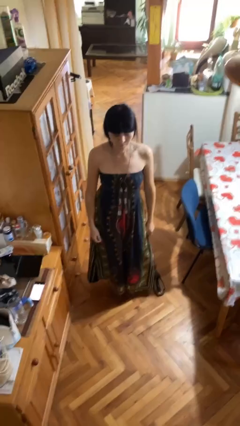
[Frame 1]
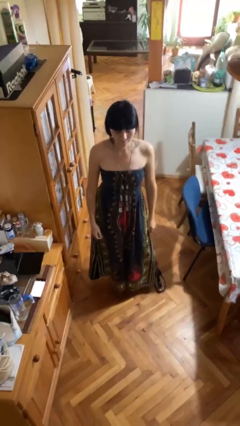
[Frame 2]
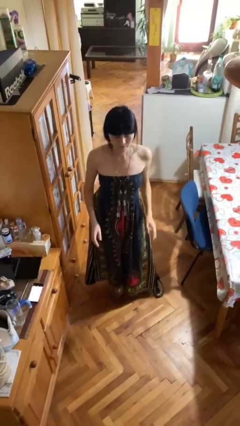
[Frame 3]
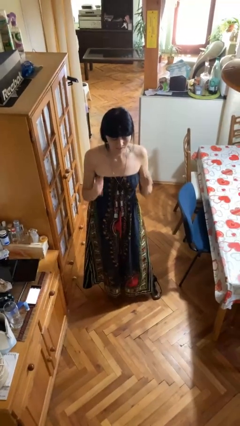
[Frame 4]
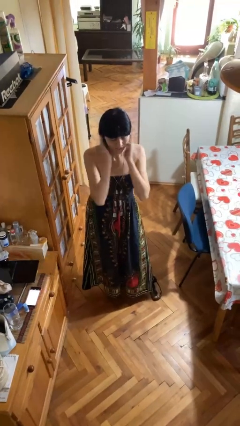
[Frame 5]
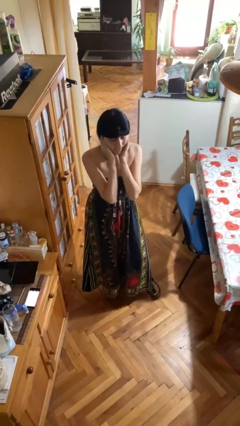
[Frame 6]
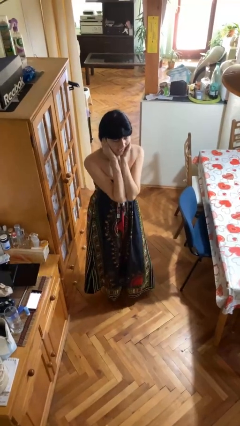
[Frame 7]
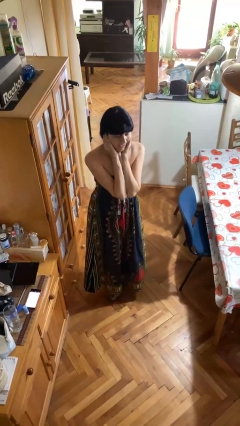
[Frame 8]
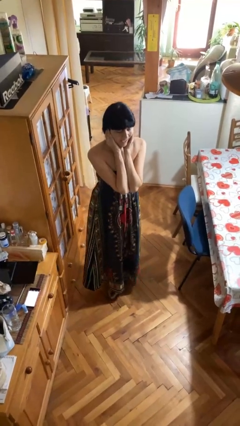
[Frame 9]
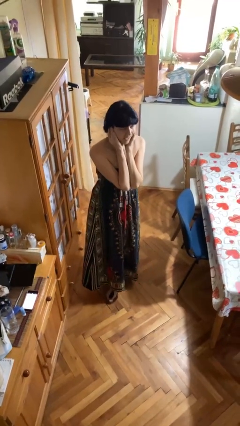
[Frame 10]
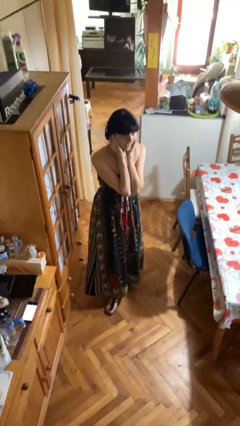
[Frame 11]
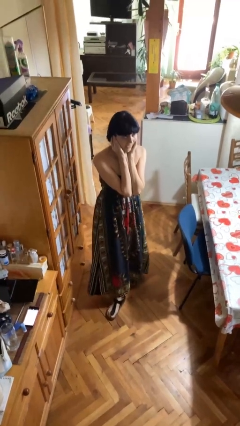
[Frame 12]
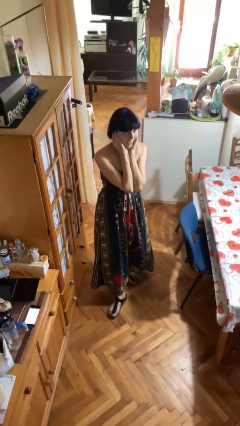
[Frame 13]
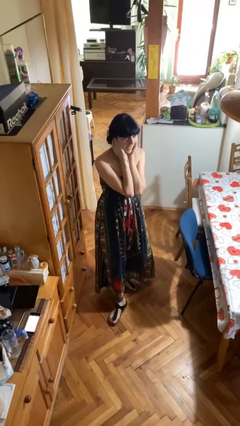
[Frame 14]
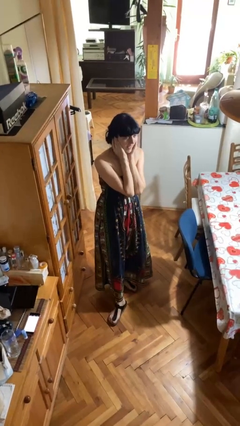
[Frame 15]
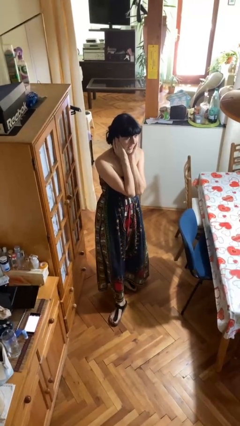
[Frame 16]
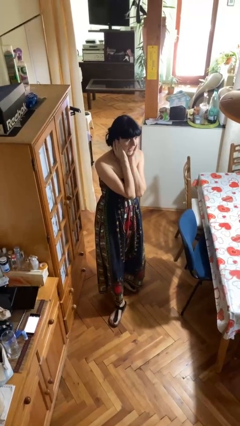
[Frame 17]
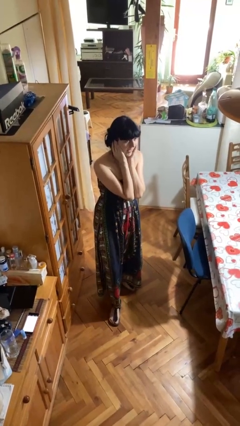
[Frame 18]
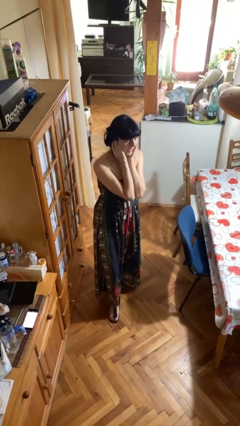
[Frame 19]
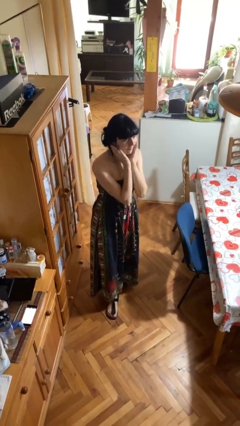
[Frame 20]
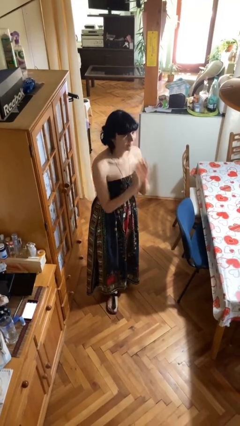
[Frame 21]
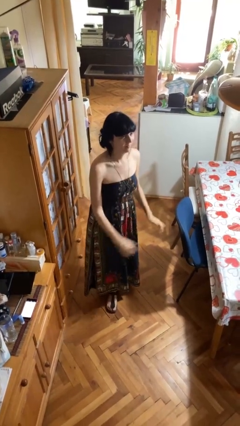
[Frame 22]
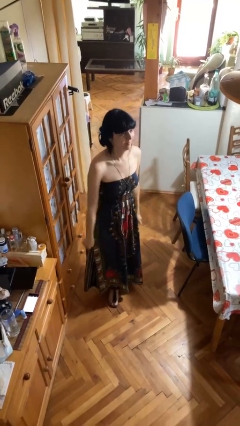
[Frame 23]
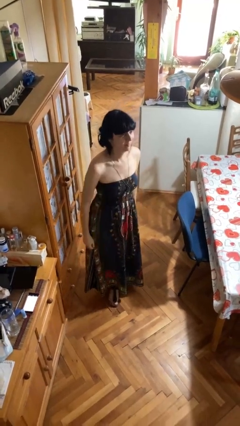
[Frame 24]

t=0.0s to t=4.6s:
person puts fingers in ear

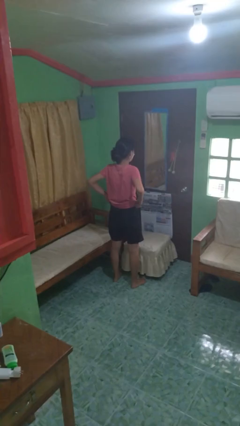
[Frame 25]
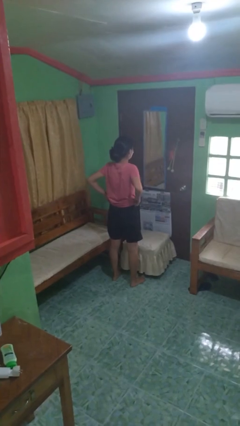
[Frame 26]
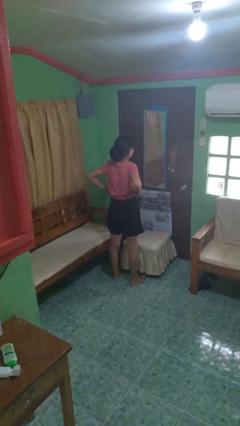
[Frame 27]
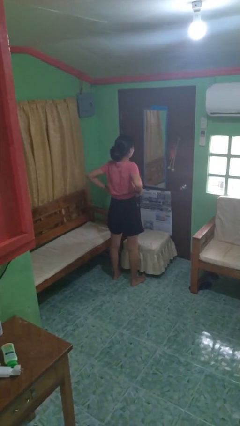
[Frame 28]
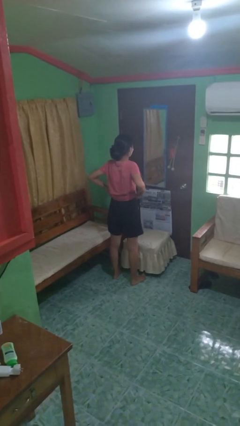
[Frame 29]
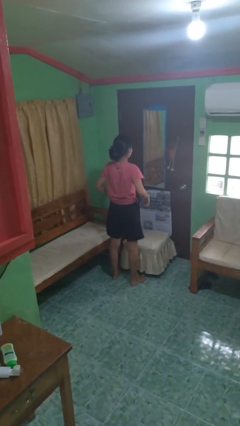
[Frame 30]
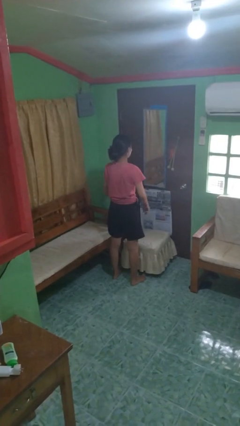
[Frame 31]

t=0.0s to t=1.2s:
person hikes up pants

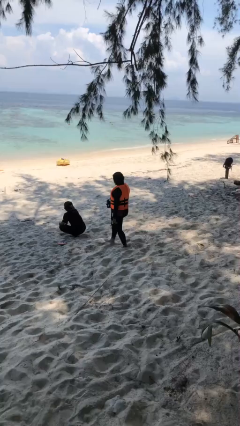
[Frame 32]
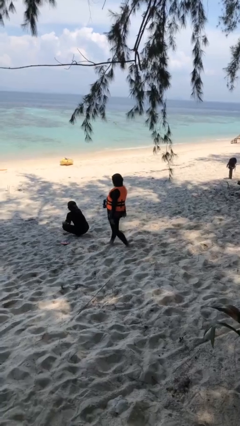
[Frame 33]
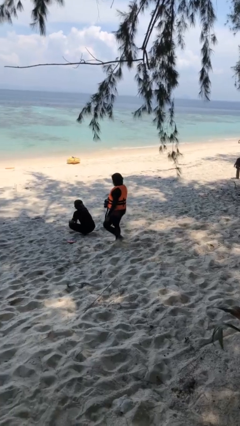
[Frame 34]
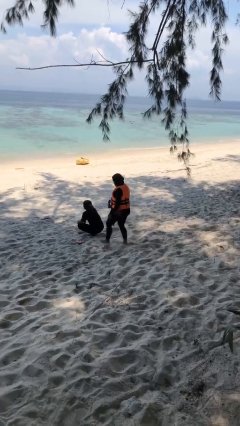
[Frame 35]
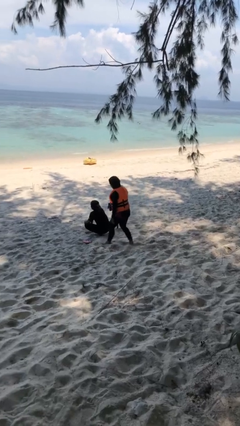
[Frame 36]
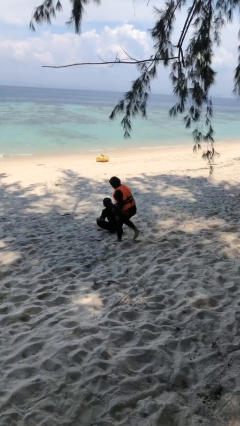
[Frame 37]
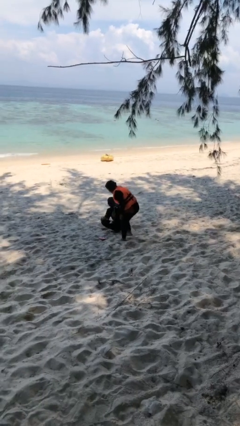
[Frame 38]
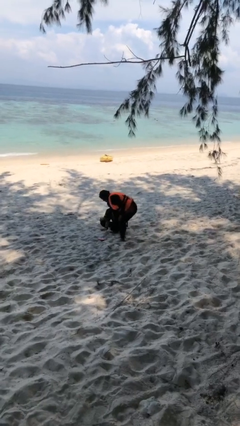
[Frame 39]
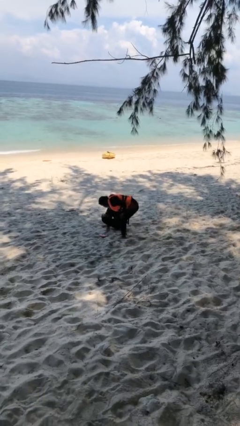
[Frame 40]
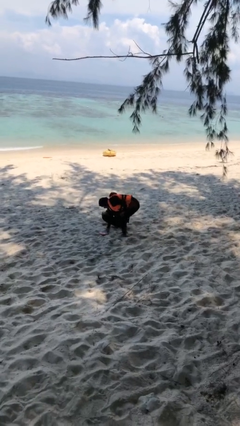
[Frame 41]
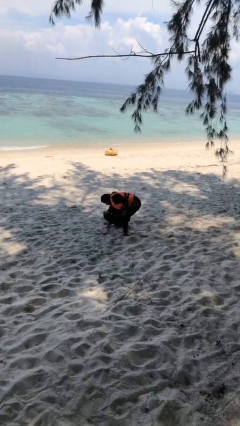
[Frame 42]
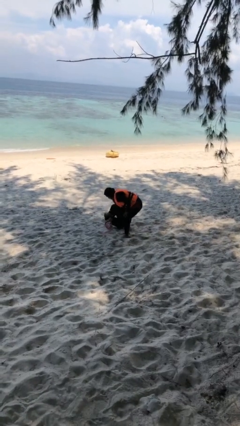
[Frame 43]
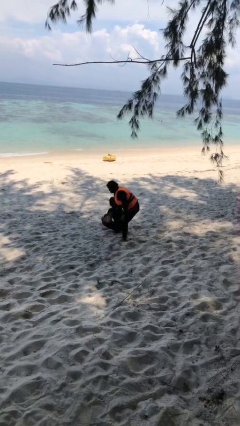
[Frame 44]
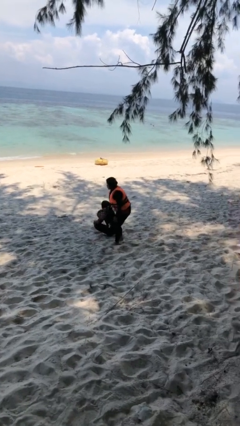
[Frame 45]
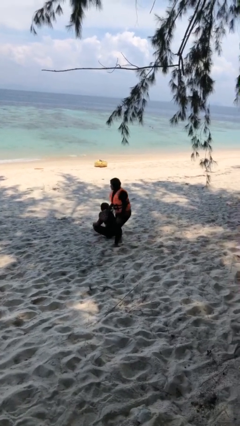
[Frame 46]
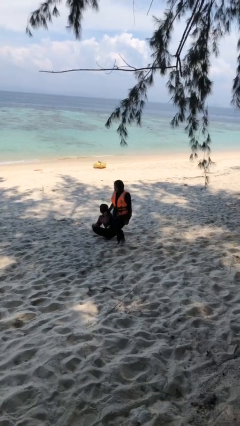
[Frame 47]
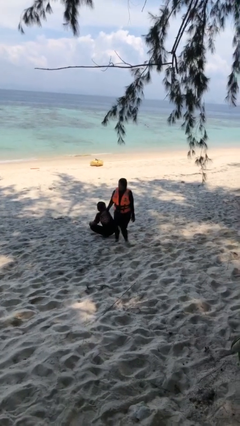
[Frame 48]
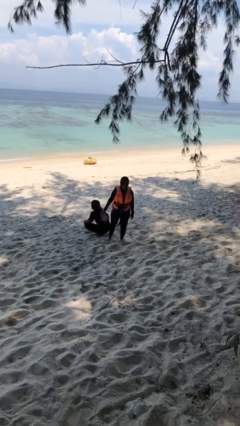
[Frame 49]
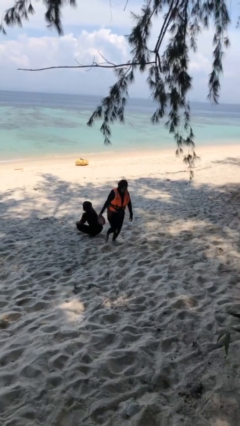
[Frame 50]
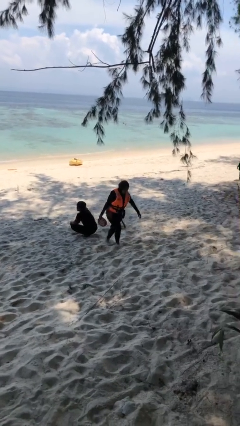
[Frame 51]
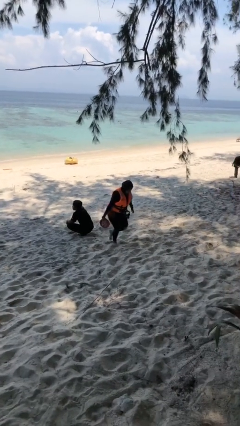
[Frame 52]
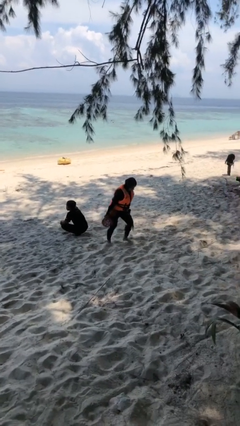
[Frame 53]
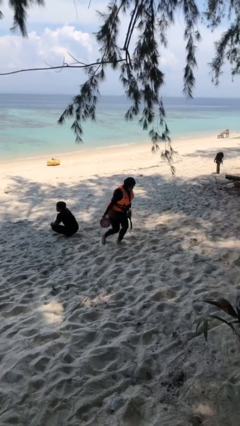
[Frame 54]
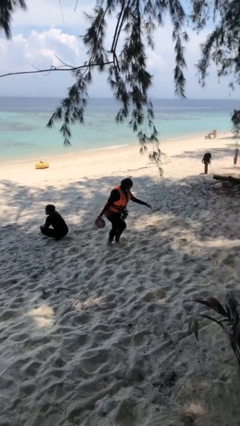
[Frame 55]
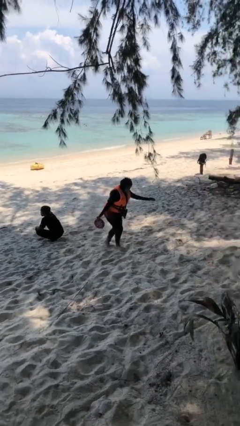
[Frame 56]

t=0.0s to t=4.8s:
person steals object from person

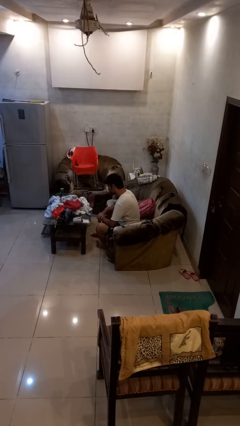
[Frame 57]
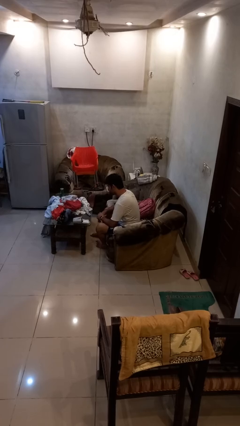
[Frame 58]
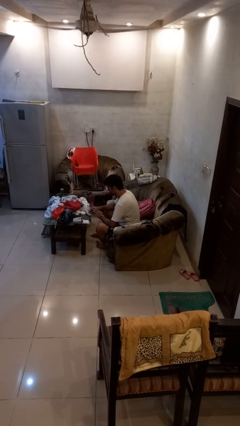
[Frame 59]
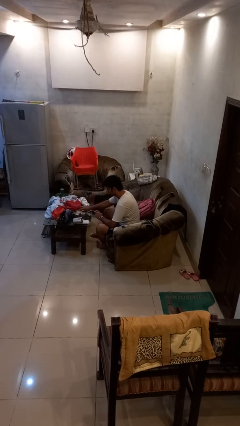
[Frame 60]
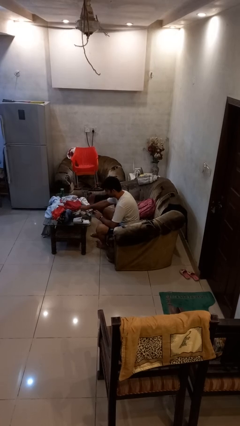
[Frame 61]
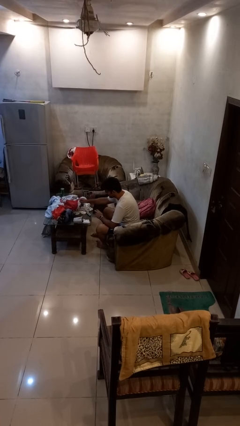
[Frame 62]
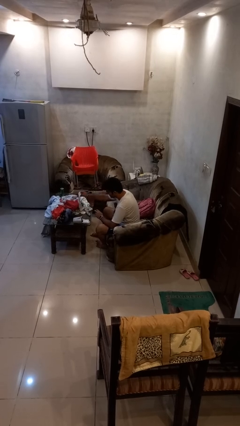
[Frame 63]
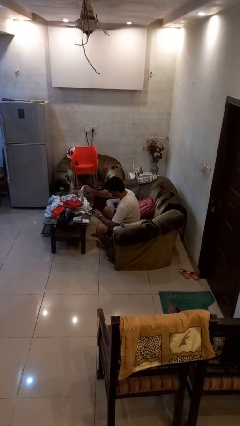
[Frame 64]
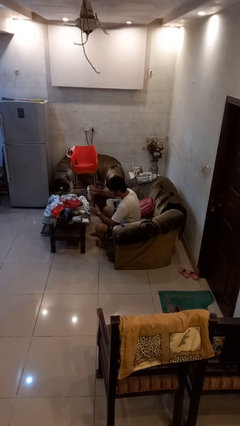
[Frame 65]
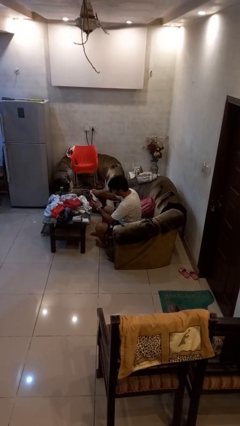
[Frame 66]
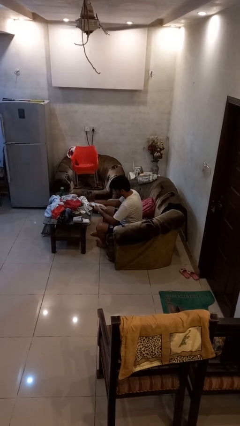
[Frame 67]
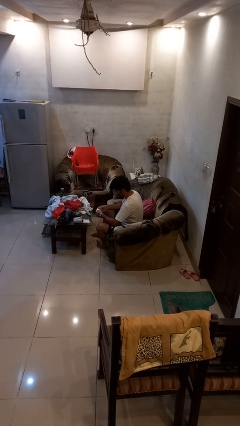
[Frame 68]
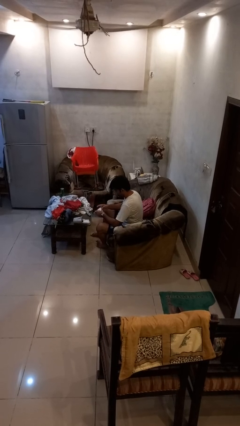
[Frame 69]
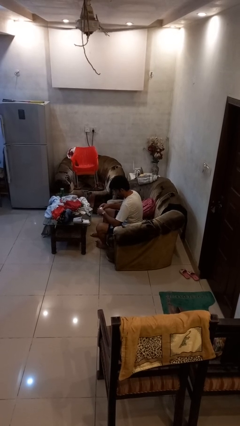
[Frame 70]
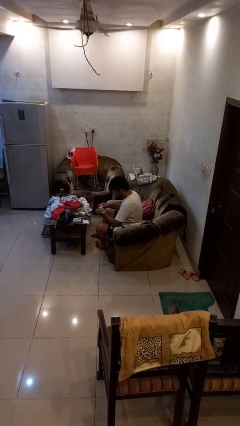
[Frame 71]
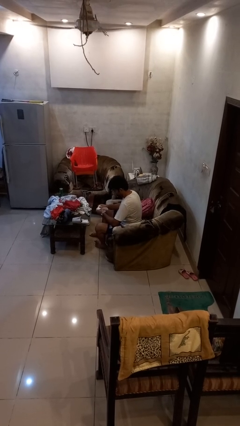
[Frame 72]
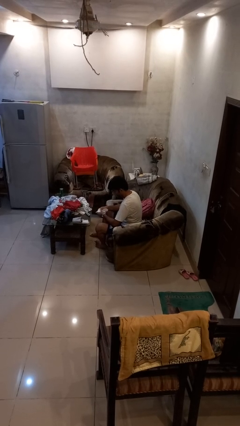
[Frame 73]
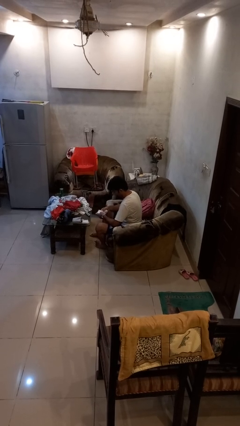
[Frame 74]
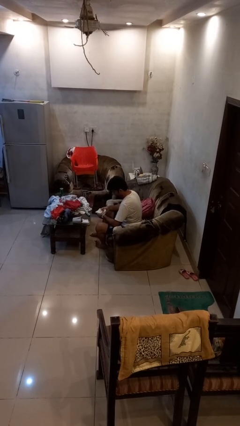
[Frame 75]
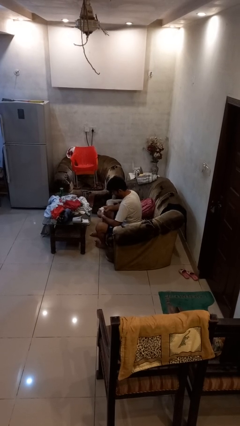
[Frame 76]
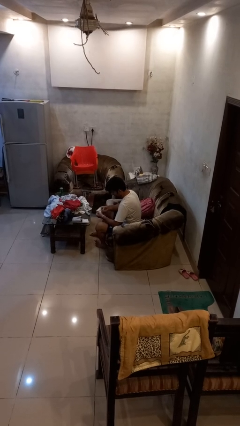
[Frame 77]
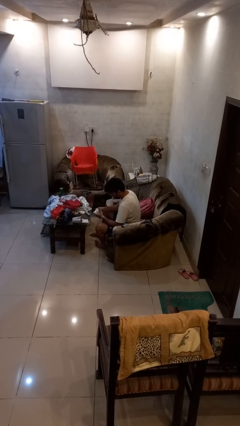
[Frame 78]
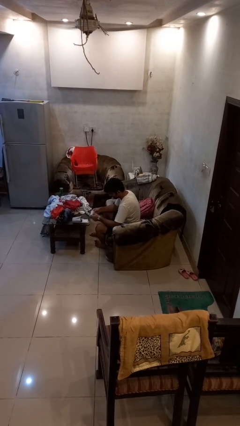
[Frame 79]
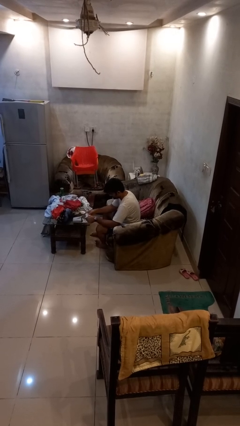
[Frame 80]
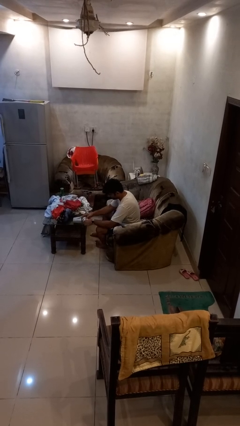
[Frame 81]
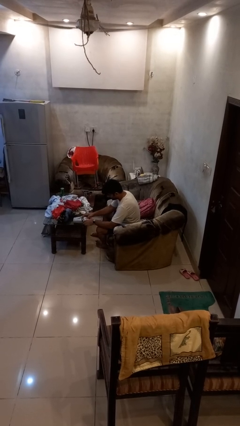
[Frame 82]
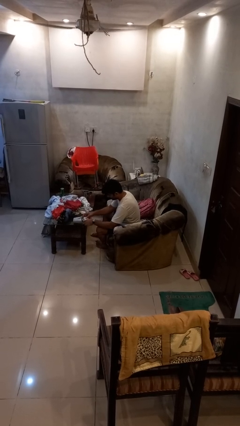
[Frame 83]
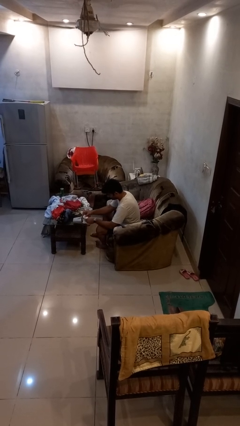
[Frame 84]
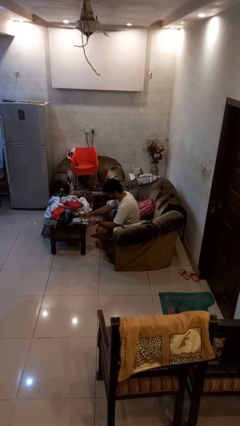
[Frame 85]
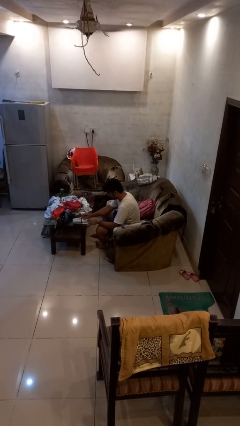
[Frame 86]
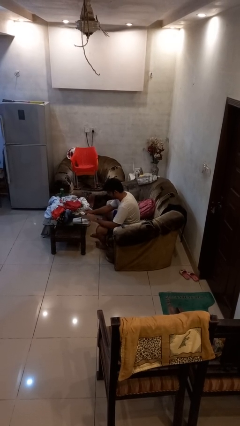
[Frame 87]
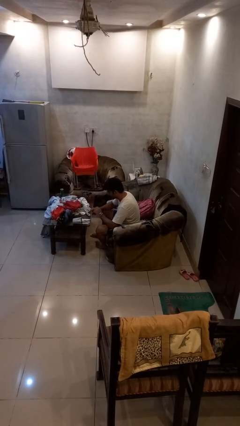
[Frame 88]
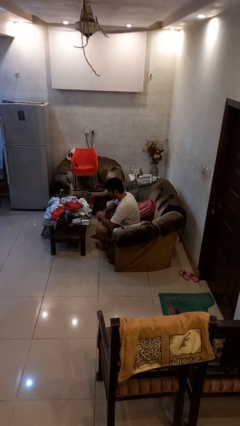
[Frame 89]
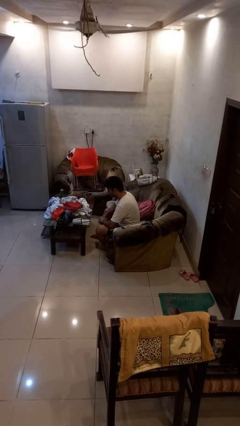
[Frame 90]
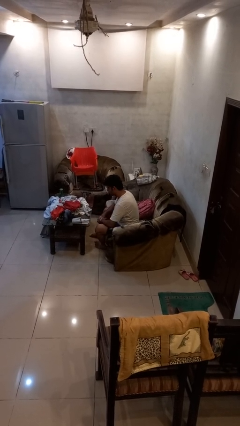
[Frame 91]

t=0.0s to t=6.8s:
person folds socks
